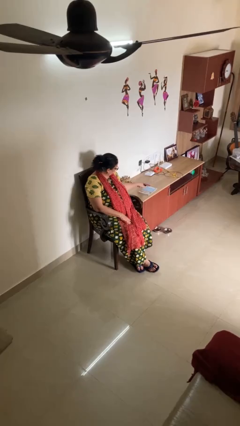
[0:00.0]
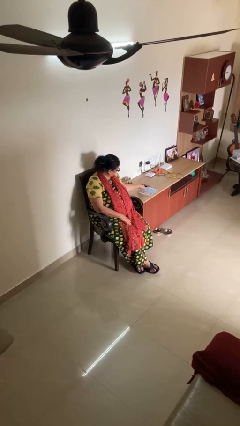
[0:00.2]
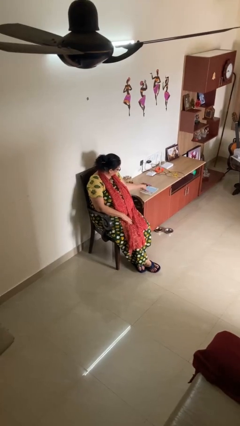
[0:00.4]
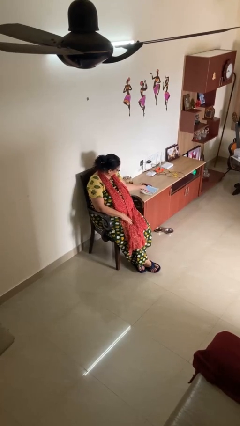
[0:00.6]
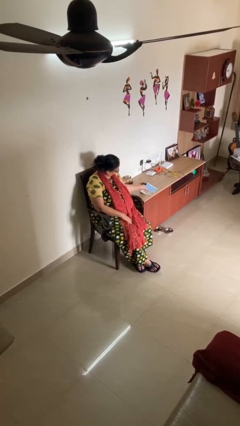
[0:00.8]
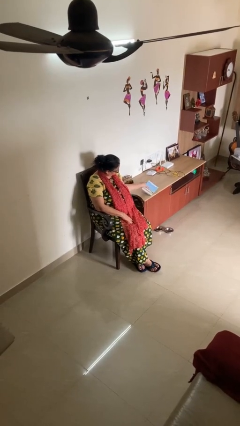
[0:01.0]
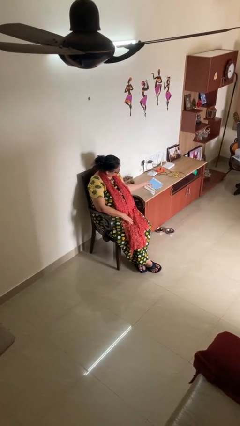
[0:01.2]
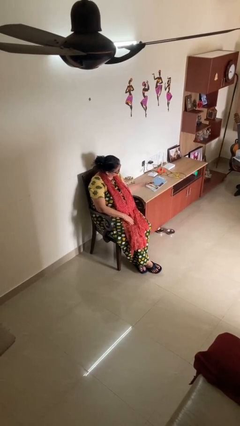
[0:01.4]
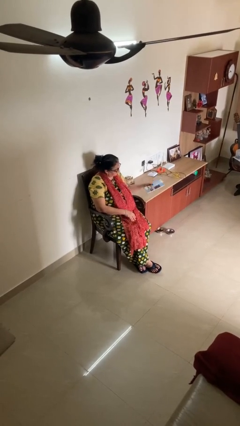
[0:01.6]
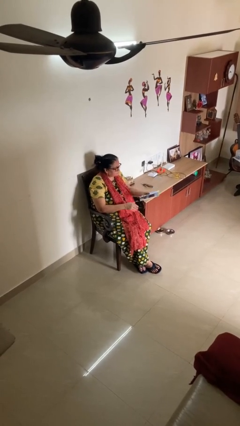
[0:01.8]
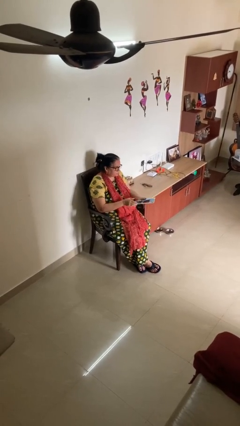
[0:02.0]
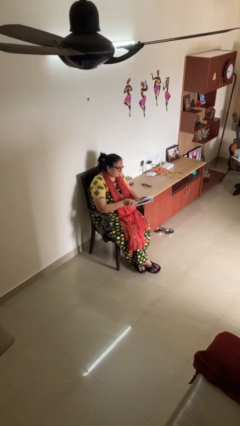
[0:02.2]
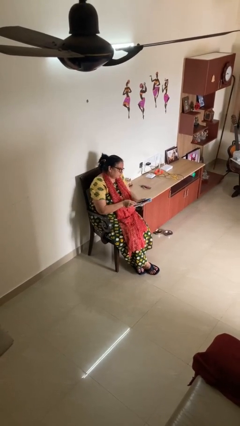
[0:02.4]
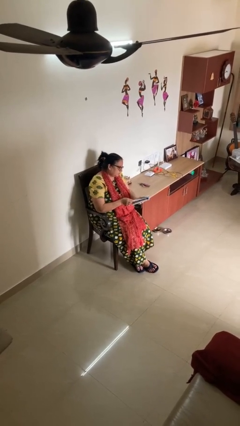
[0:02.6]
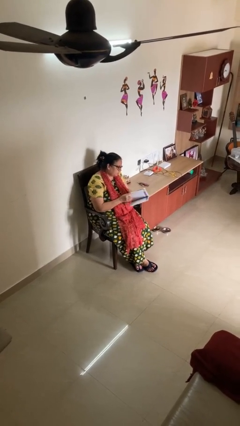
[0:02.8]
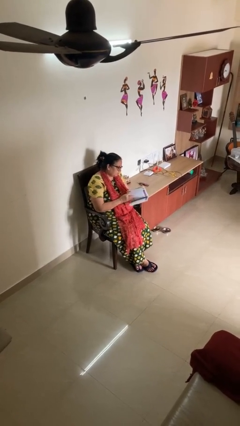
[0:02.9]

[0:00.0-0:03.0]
person picks up object from table

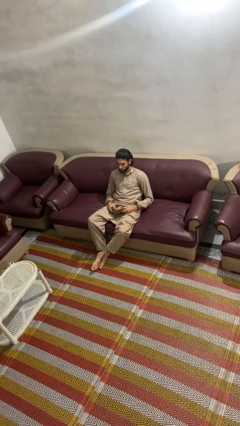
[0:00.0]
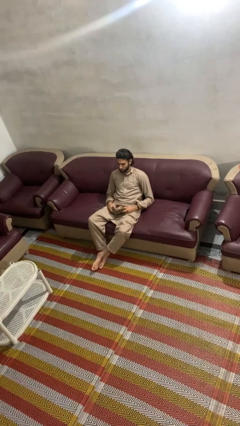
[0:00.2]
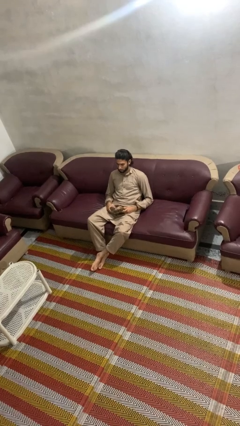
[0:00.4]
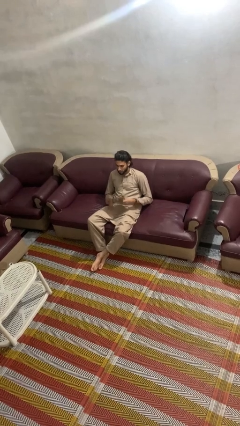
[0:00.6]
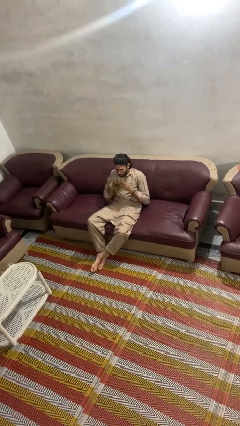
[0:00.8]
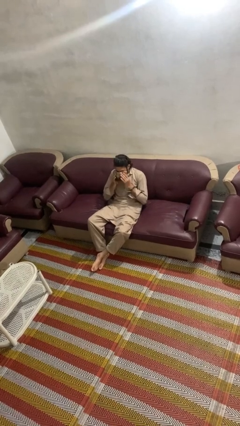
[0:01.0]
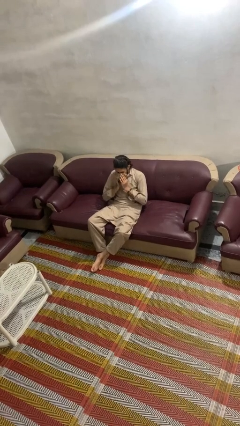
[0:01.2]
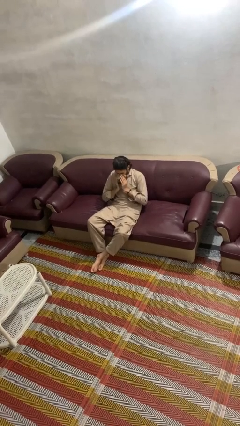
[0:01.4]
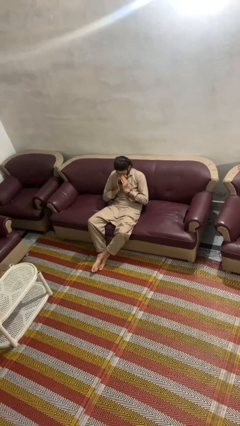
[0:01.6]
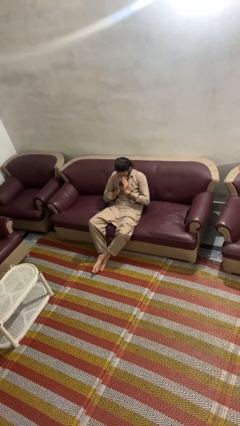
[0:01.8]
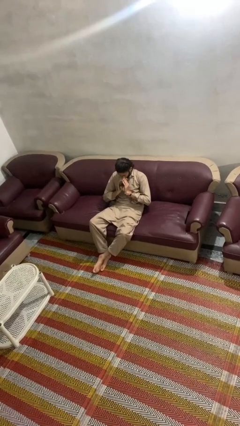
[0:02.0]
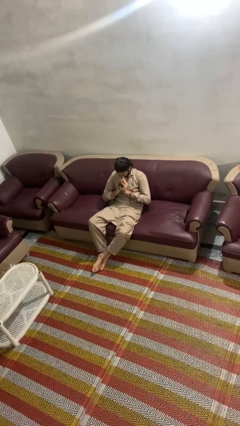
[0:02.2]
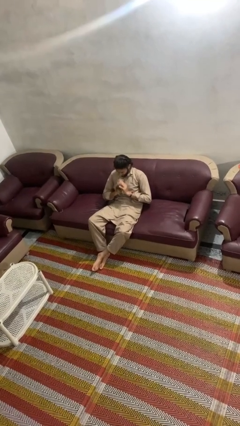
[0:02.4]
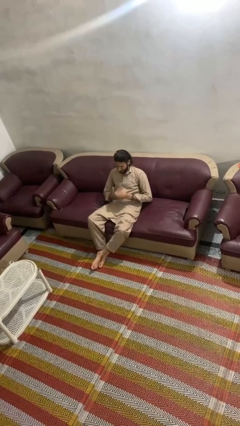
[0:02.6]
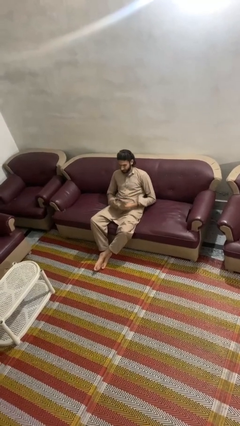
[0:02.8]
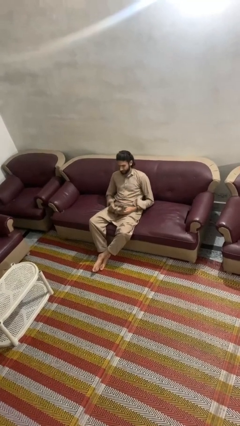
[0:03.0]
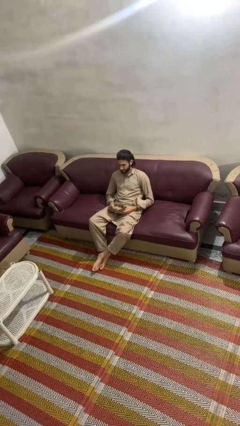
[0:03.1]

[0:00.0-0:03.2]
person blows nose

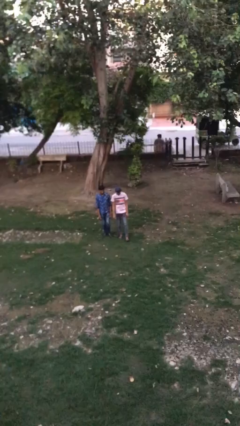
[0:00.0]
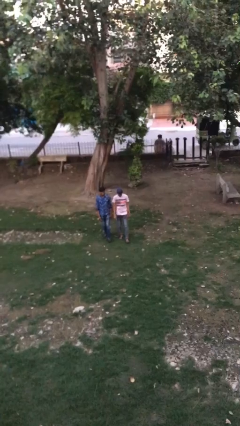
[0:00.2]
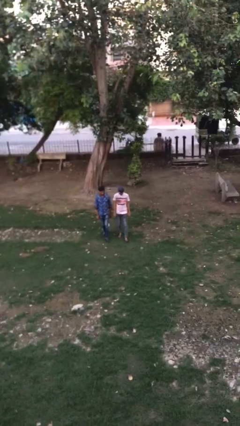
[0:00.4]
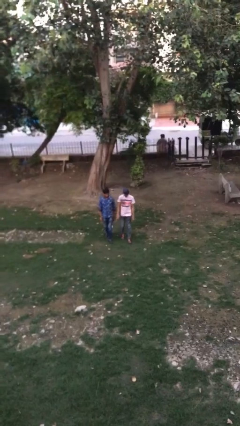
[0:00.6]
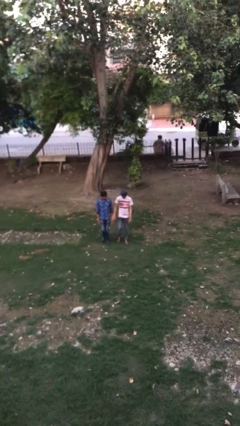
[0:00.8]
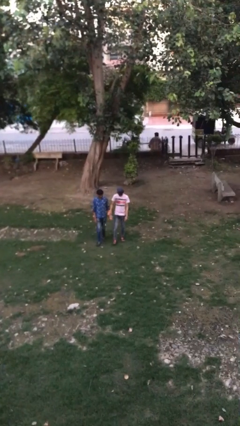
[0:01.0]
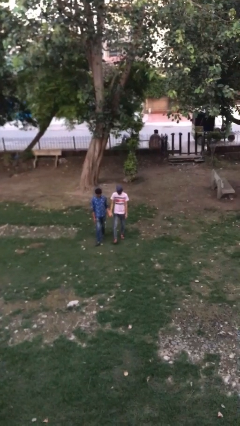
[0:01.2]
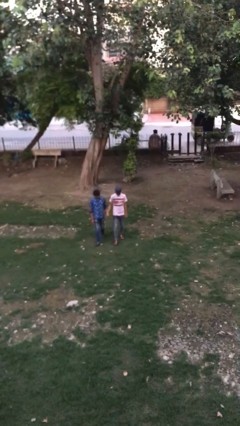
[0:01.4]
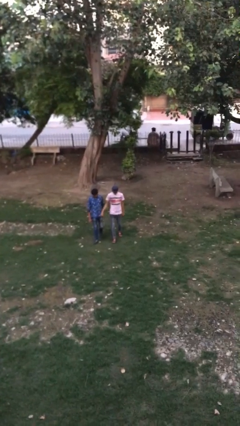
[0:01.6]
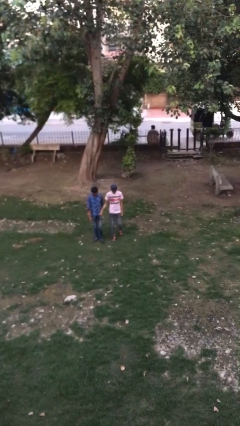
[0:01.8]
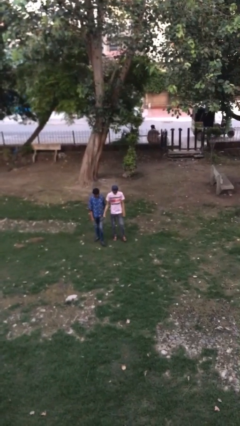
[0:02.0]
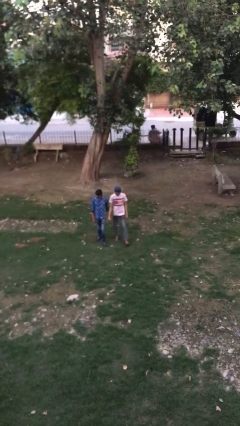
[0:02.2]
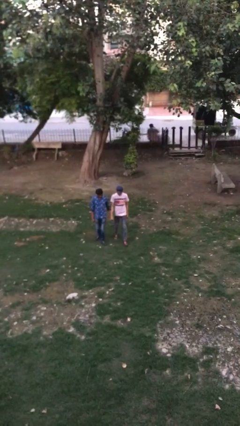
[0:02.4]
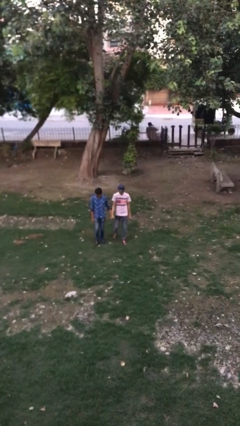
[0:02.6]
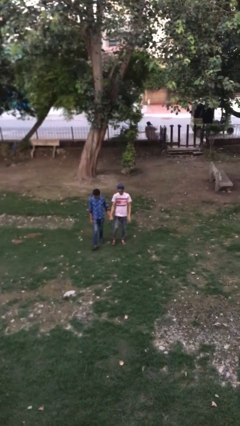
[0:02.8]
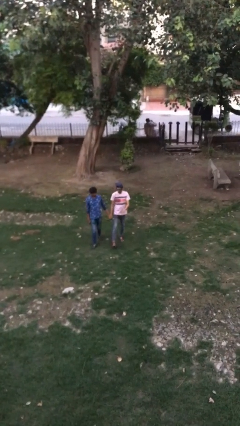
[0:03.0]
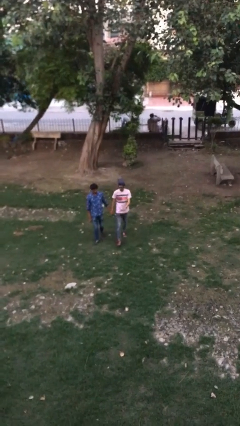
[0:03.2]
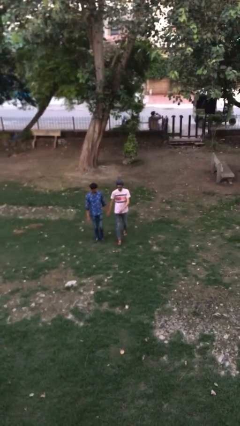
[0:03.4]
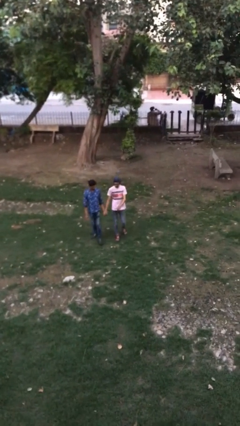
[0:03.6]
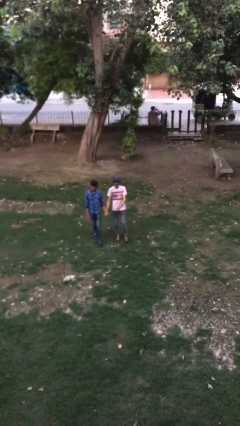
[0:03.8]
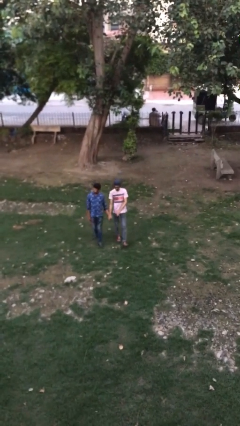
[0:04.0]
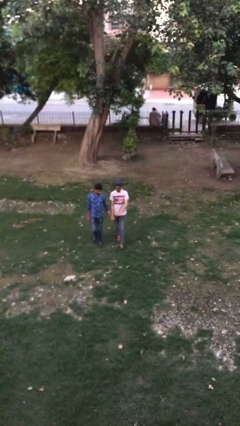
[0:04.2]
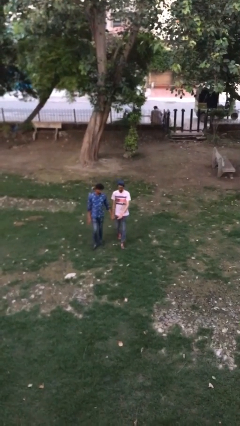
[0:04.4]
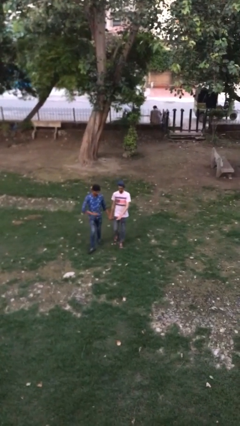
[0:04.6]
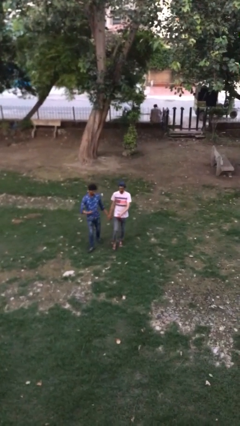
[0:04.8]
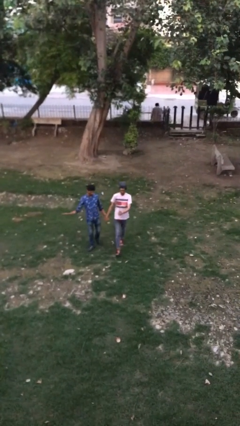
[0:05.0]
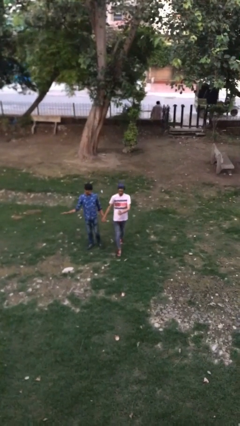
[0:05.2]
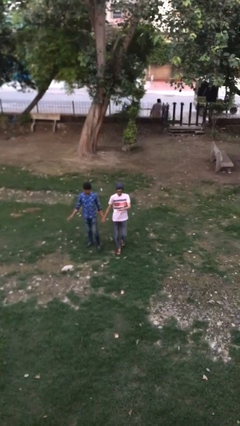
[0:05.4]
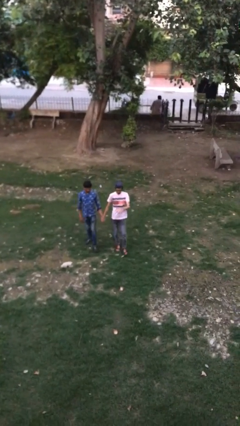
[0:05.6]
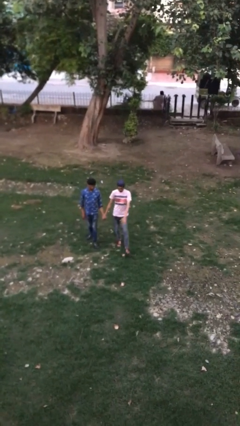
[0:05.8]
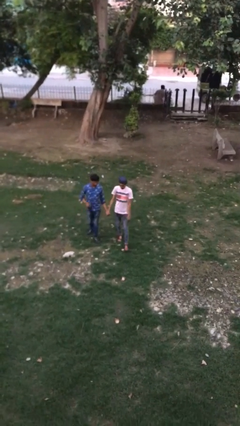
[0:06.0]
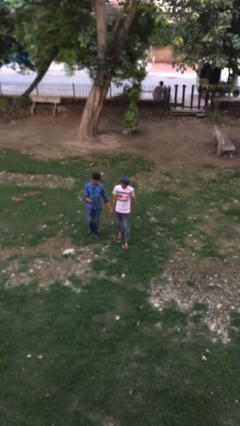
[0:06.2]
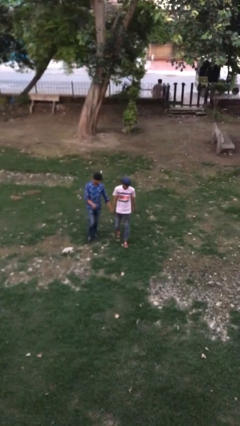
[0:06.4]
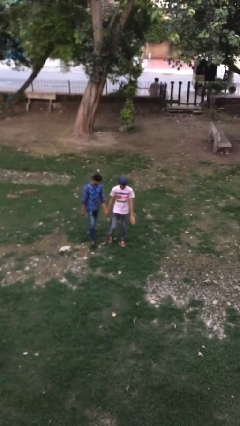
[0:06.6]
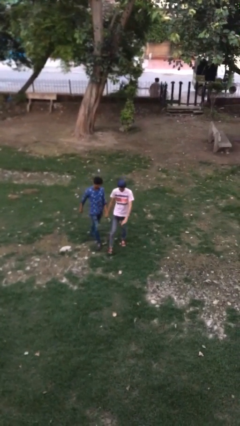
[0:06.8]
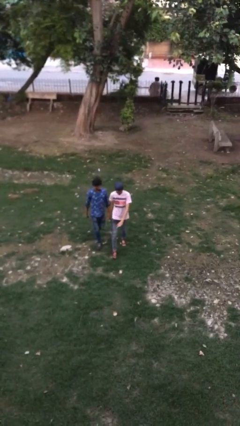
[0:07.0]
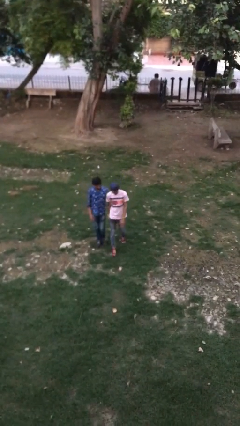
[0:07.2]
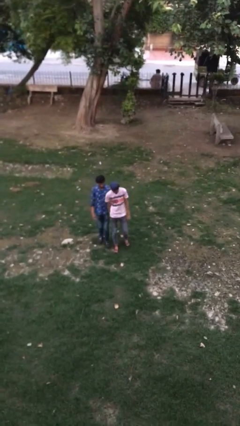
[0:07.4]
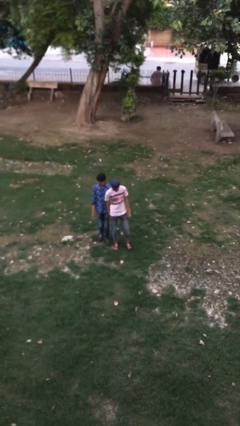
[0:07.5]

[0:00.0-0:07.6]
person holds hand

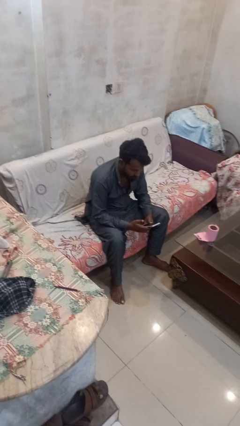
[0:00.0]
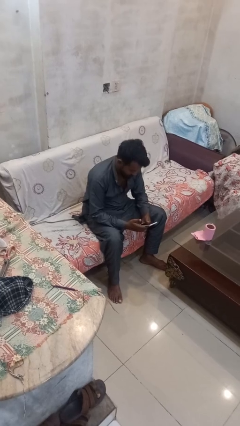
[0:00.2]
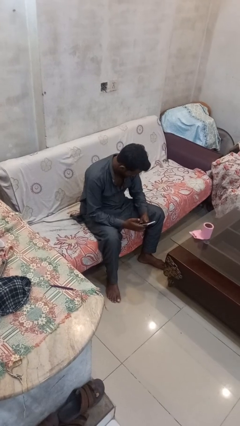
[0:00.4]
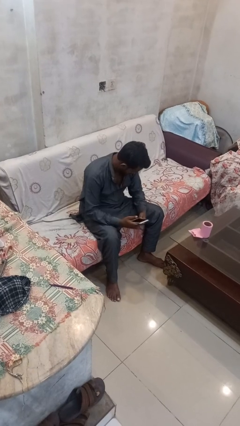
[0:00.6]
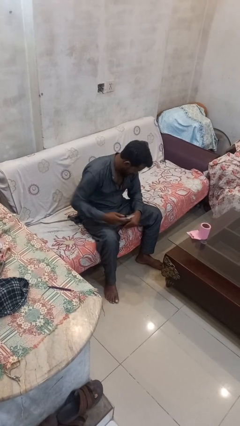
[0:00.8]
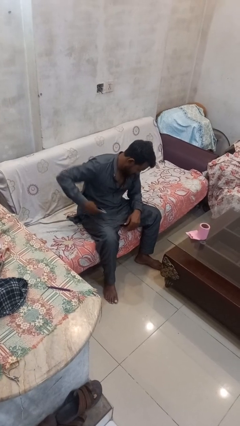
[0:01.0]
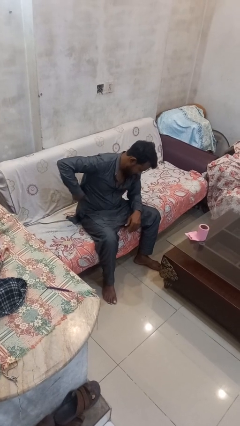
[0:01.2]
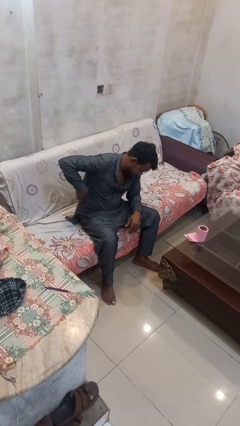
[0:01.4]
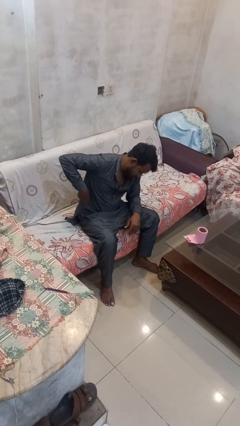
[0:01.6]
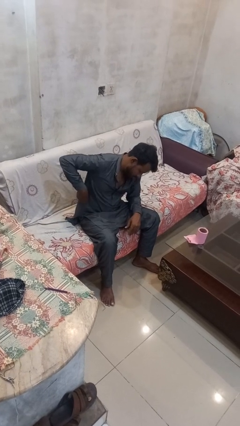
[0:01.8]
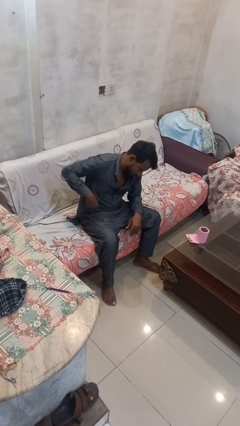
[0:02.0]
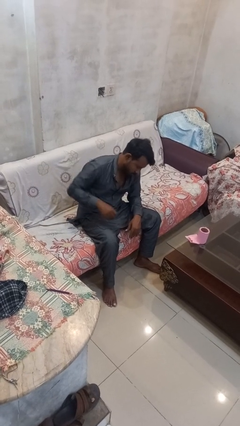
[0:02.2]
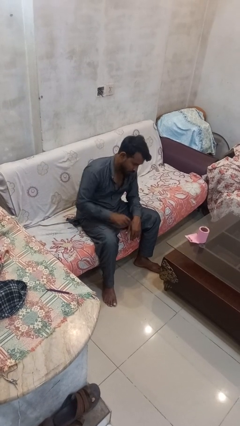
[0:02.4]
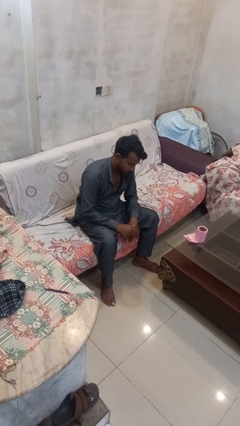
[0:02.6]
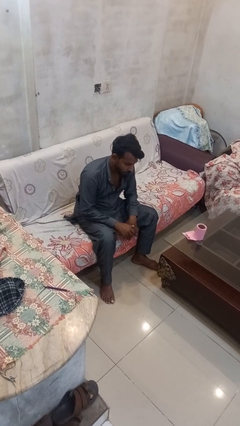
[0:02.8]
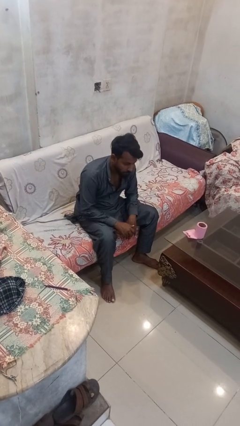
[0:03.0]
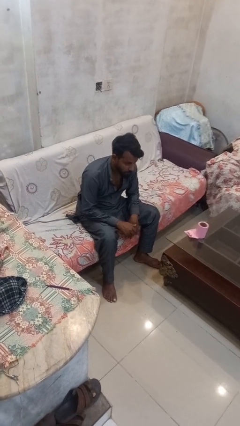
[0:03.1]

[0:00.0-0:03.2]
person puts phone into pocket

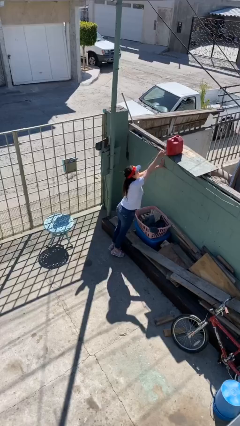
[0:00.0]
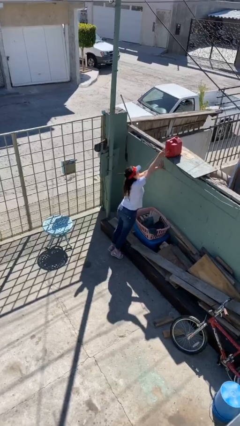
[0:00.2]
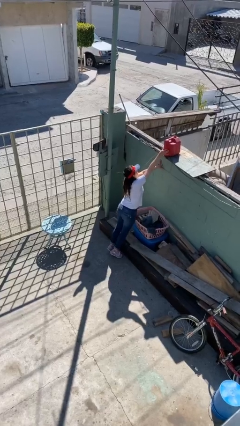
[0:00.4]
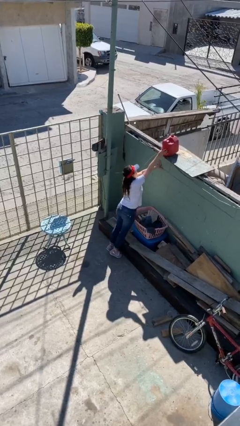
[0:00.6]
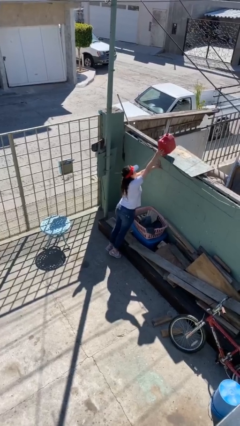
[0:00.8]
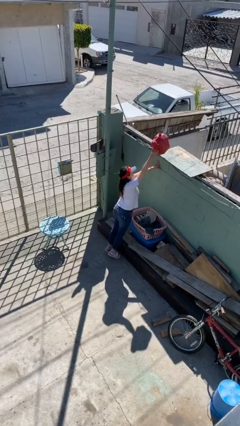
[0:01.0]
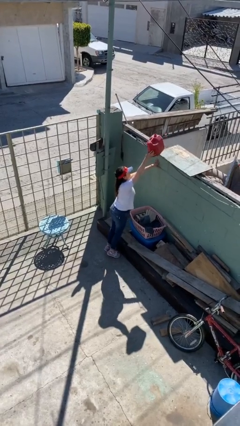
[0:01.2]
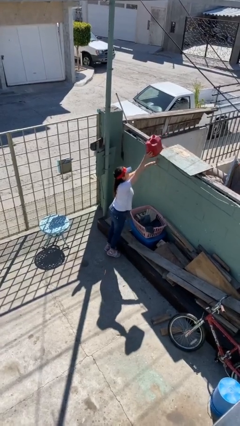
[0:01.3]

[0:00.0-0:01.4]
person picks up object from shelf
